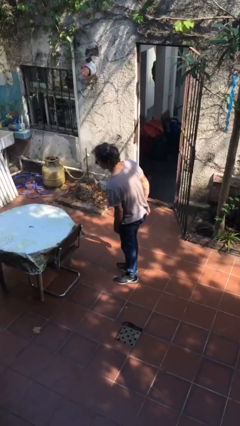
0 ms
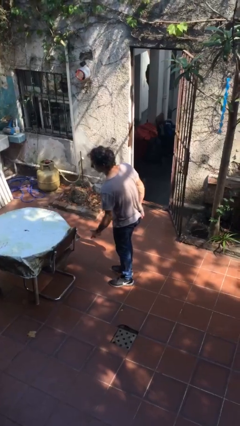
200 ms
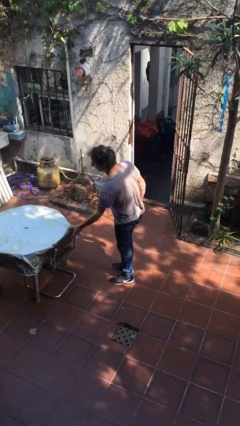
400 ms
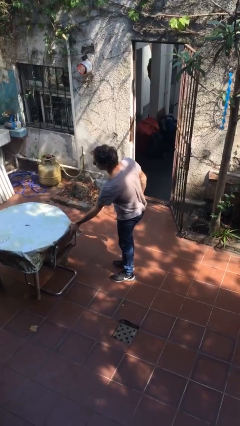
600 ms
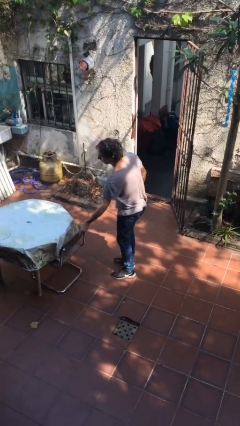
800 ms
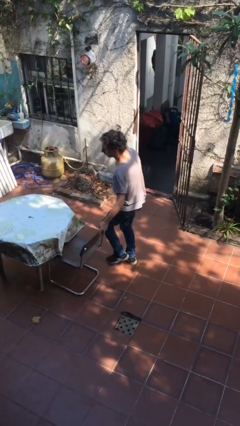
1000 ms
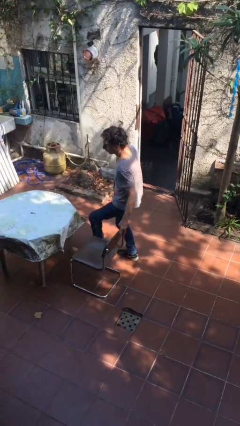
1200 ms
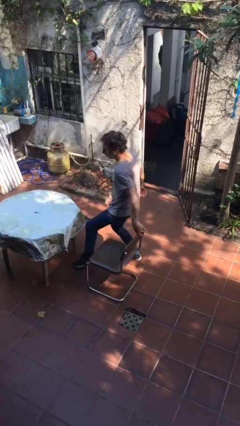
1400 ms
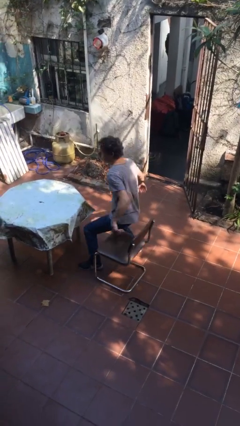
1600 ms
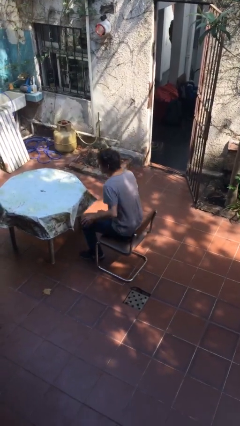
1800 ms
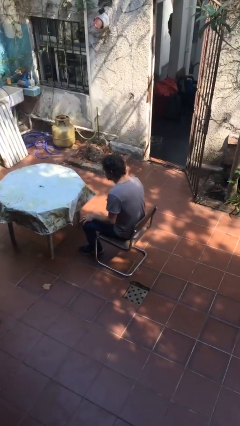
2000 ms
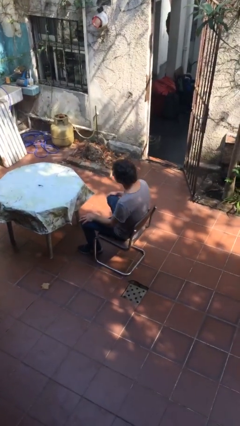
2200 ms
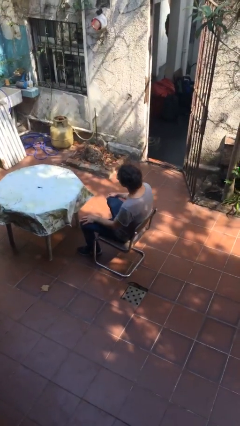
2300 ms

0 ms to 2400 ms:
person sits down

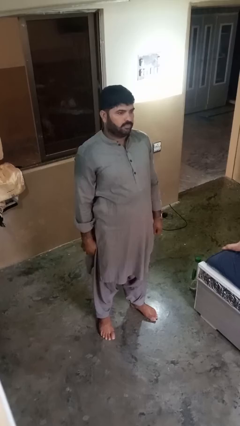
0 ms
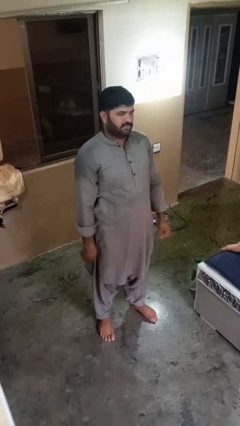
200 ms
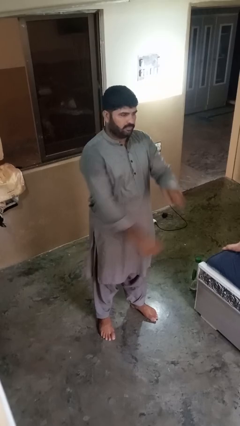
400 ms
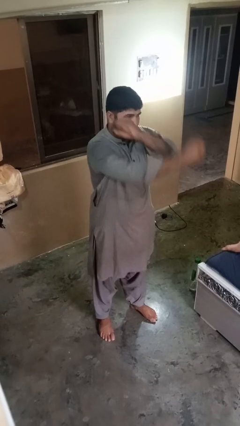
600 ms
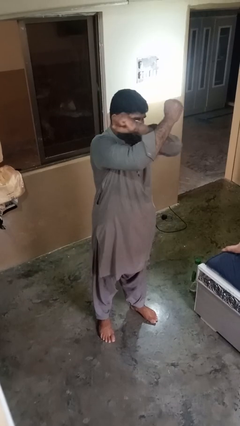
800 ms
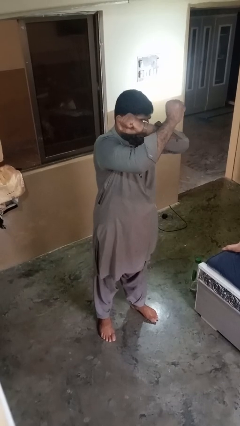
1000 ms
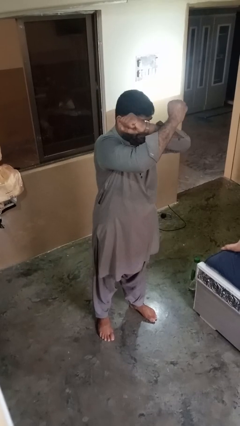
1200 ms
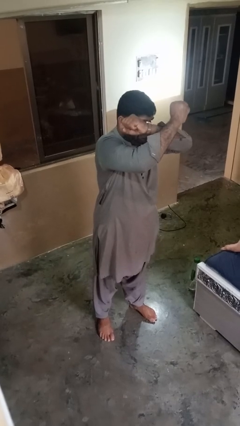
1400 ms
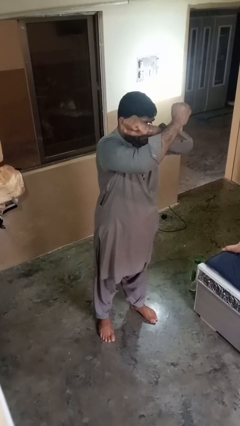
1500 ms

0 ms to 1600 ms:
person gestures arms x

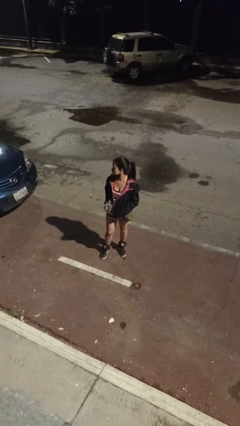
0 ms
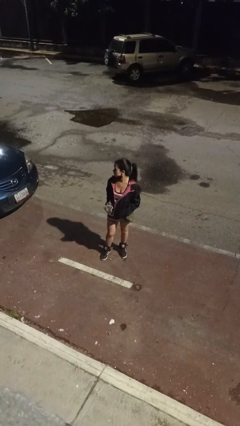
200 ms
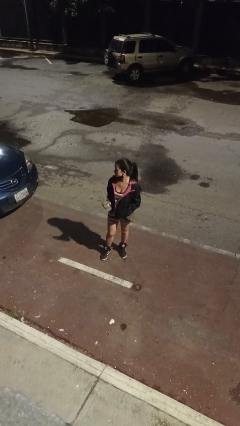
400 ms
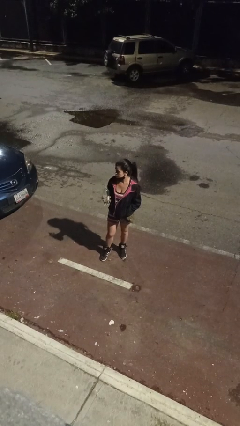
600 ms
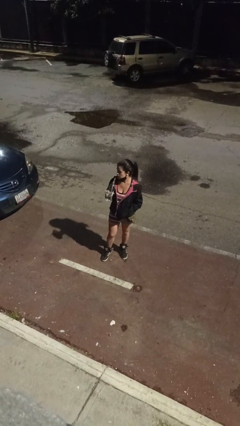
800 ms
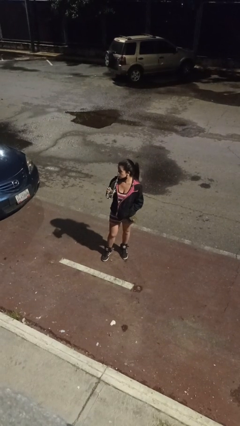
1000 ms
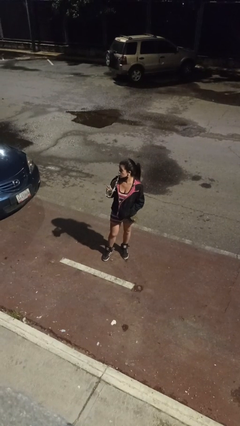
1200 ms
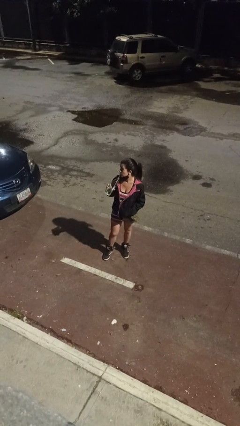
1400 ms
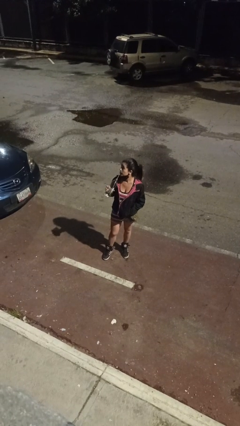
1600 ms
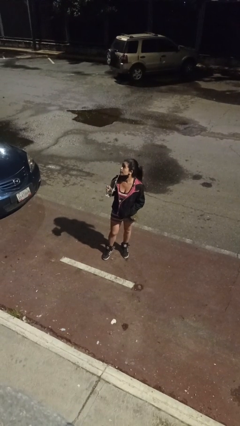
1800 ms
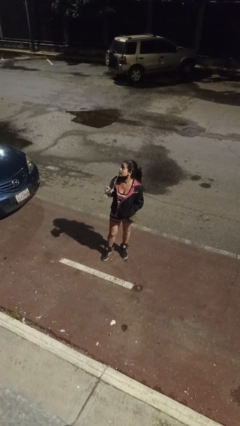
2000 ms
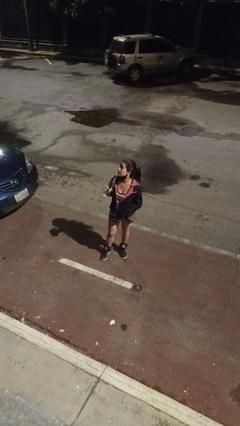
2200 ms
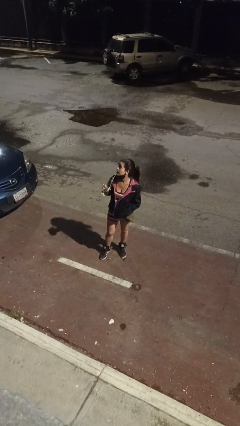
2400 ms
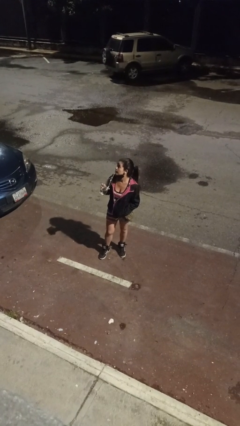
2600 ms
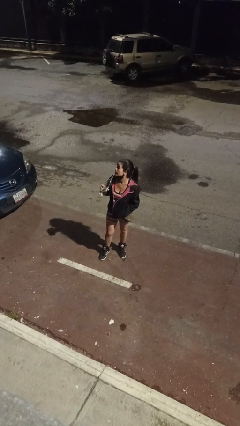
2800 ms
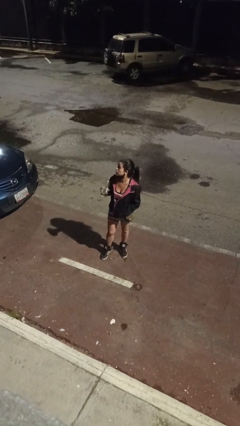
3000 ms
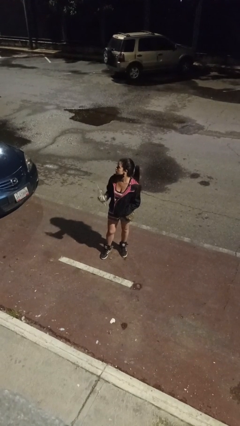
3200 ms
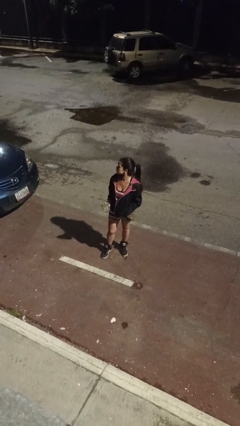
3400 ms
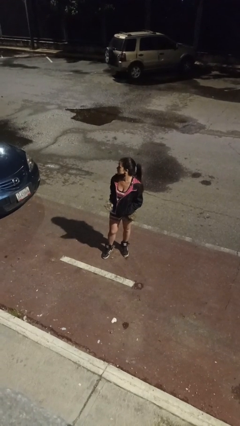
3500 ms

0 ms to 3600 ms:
person drinks from straw

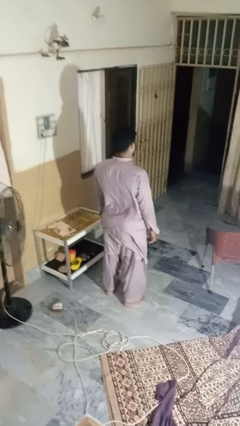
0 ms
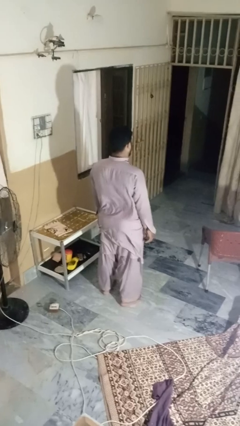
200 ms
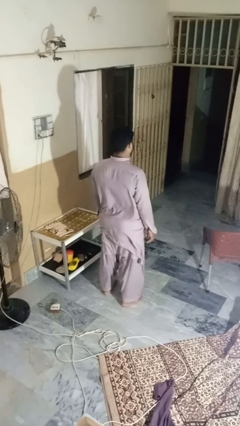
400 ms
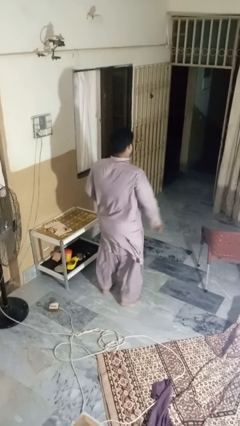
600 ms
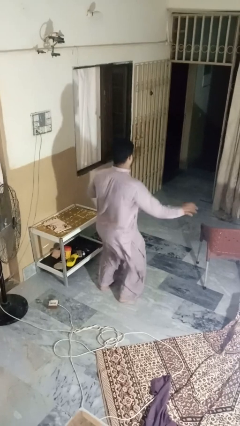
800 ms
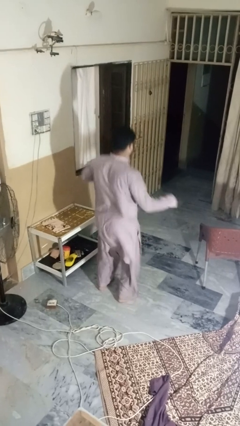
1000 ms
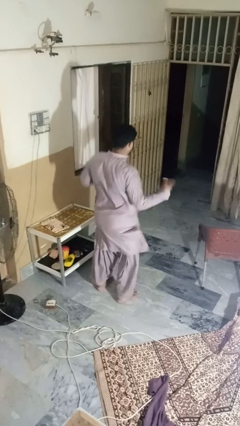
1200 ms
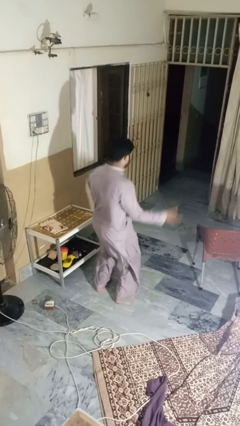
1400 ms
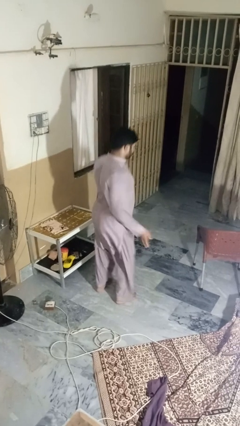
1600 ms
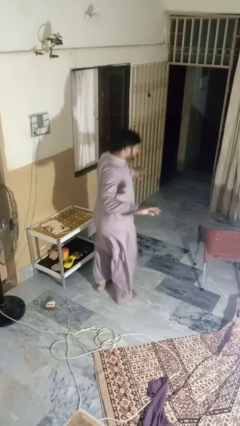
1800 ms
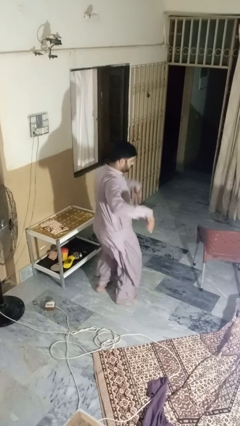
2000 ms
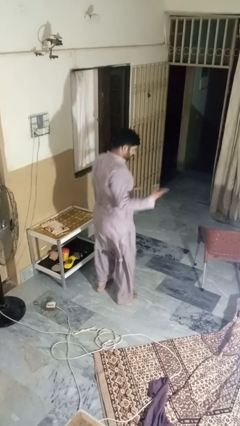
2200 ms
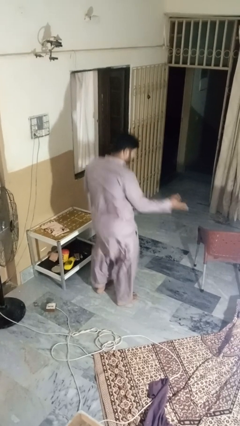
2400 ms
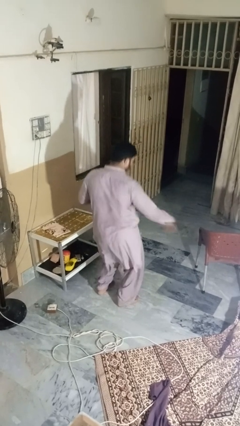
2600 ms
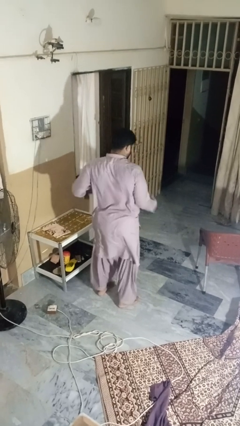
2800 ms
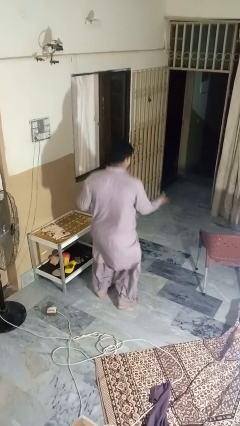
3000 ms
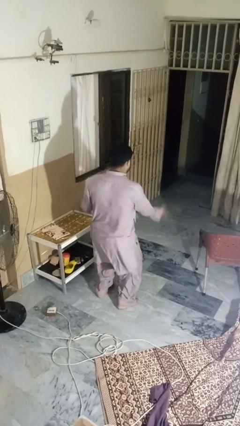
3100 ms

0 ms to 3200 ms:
person dances in place

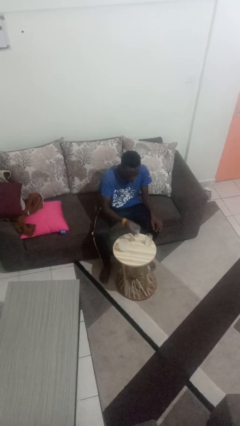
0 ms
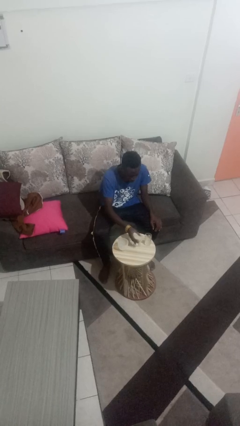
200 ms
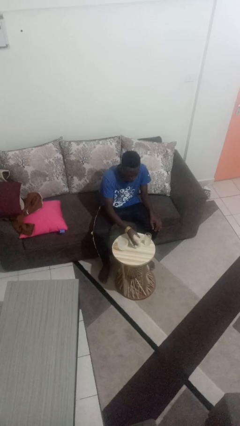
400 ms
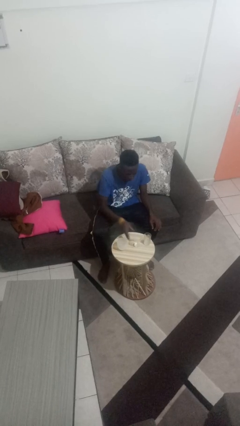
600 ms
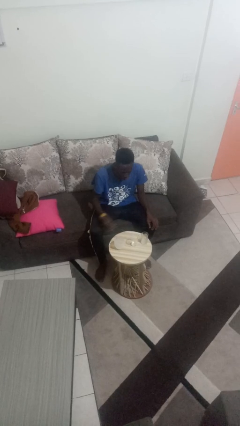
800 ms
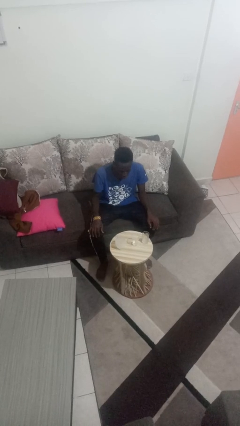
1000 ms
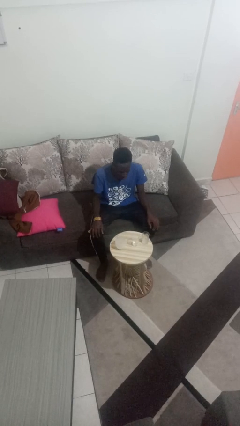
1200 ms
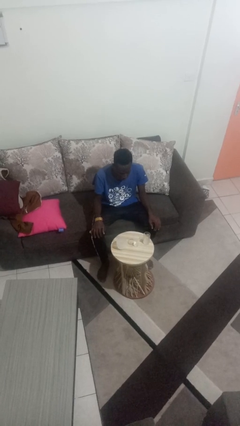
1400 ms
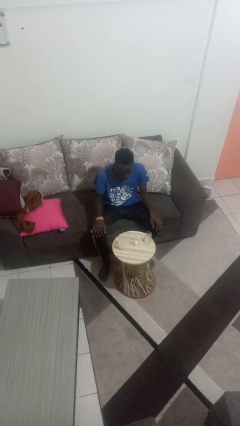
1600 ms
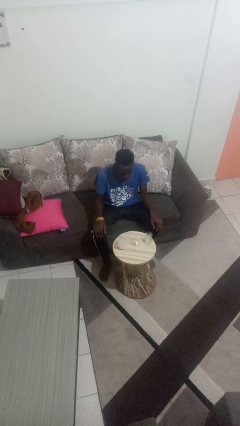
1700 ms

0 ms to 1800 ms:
person puts down object on table

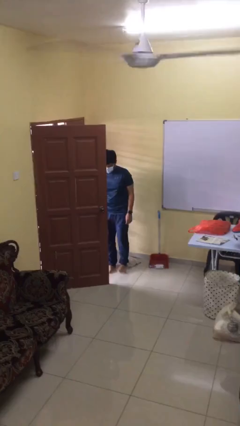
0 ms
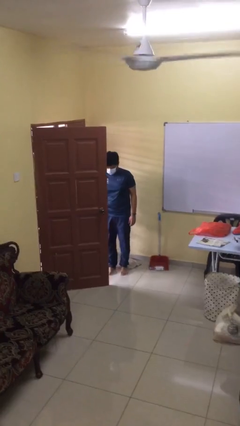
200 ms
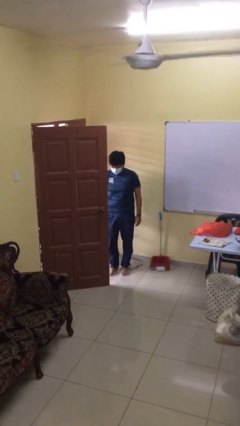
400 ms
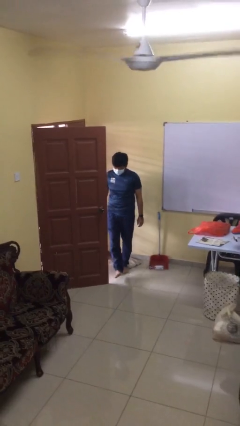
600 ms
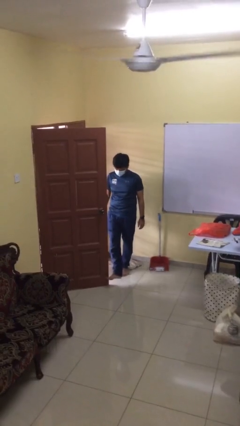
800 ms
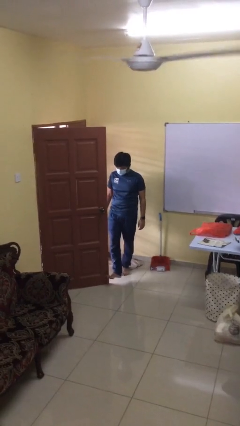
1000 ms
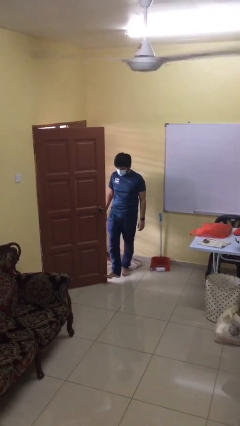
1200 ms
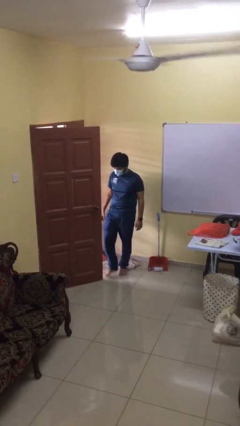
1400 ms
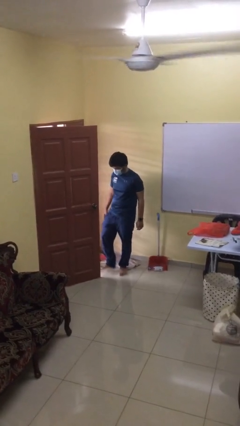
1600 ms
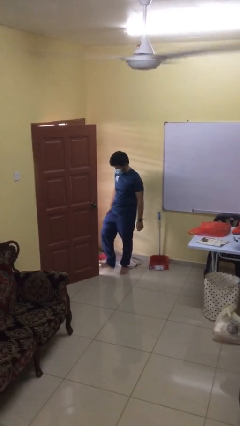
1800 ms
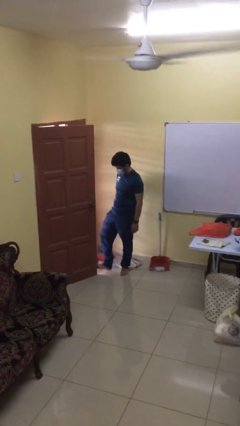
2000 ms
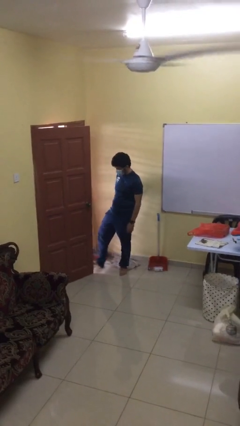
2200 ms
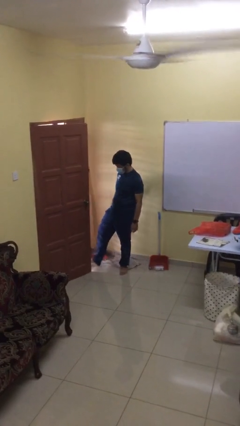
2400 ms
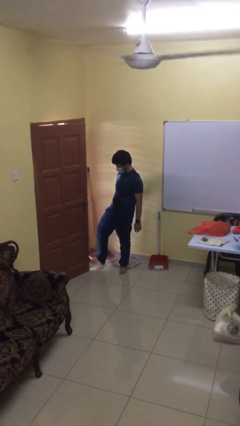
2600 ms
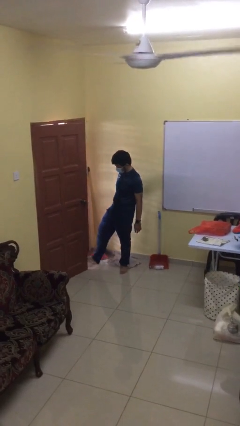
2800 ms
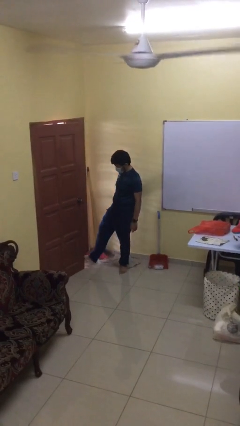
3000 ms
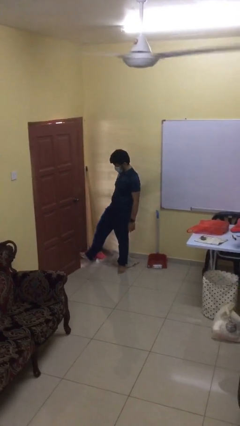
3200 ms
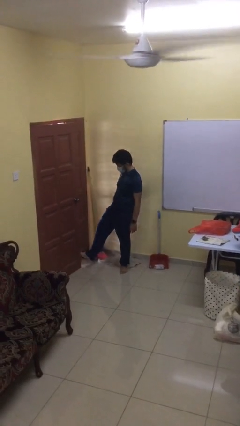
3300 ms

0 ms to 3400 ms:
person closes door with foot

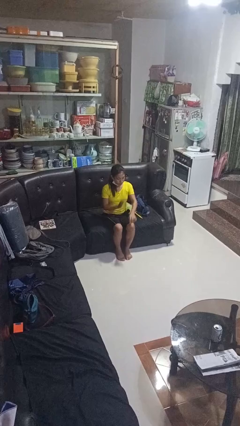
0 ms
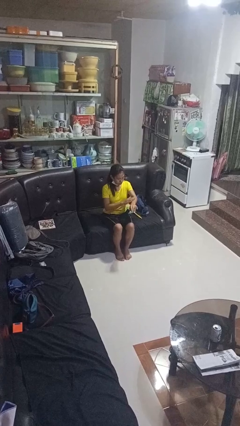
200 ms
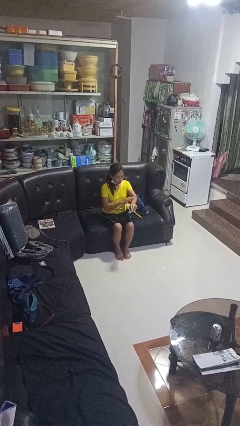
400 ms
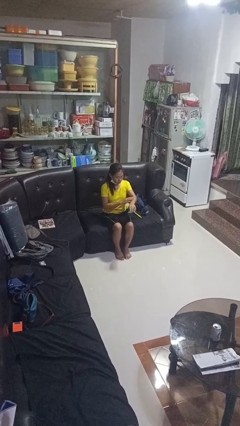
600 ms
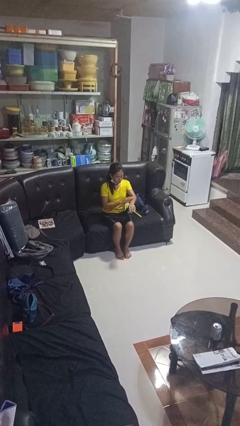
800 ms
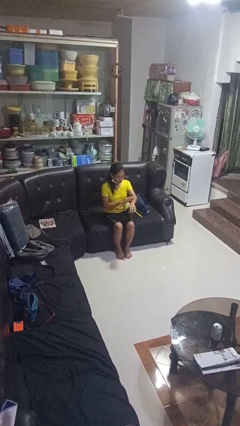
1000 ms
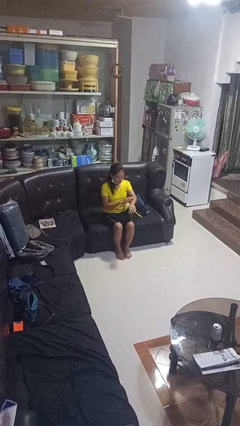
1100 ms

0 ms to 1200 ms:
person swats bug
